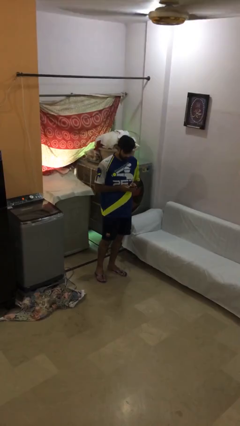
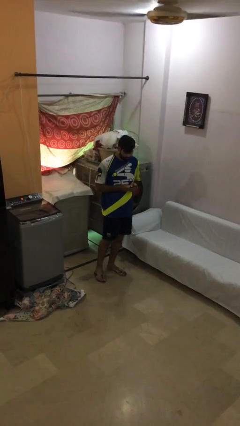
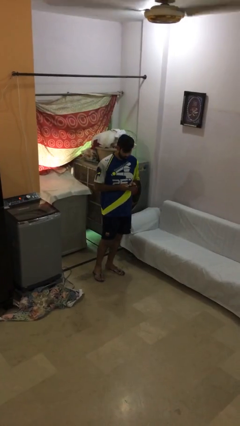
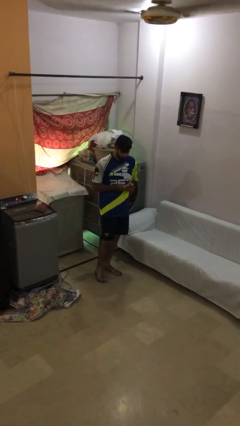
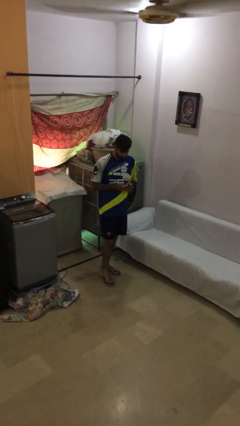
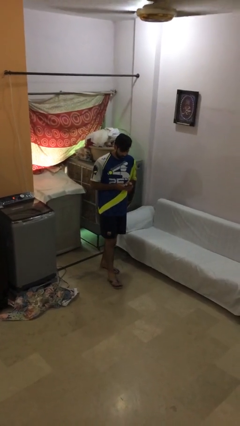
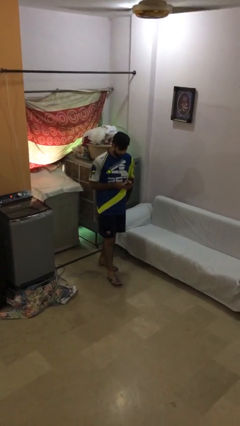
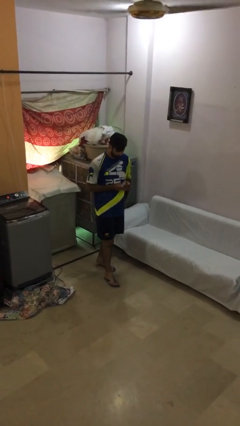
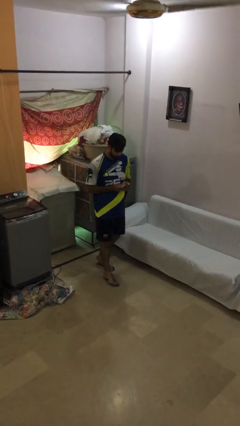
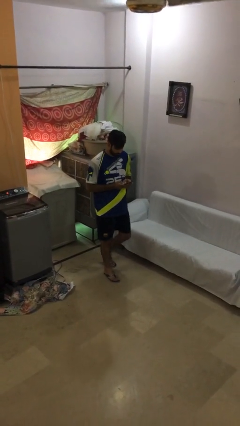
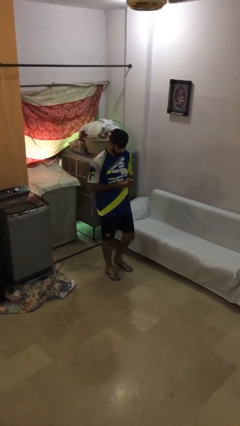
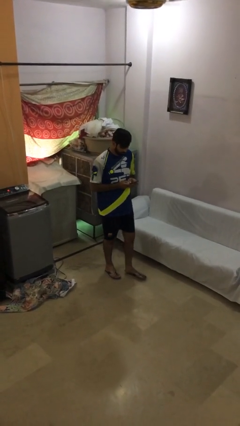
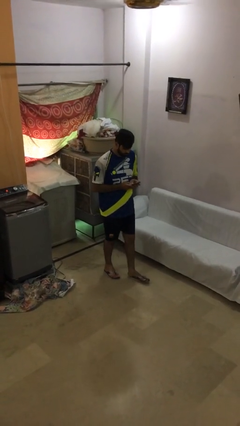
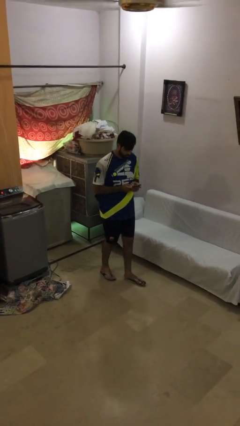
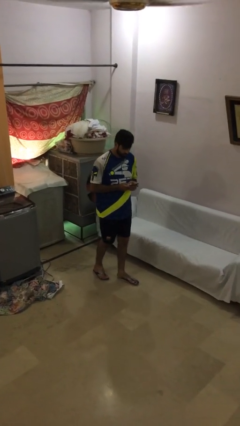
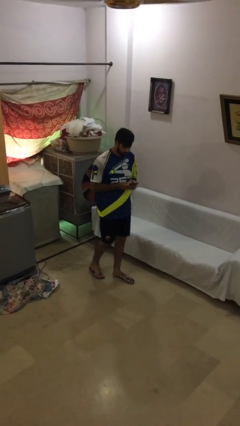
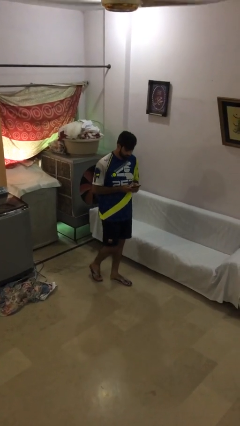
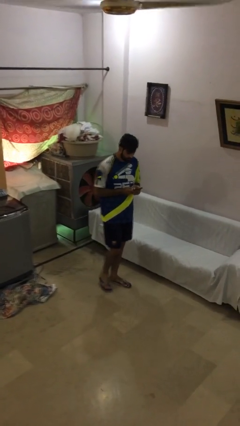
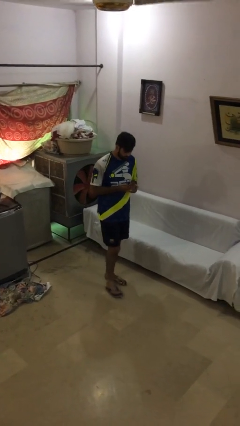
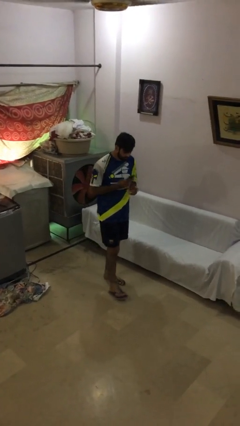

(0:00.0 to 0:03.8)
person texts on phone

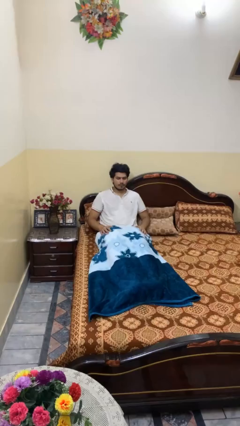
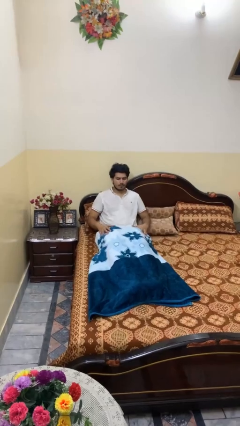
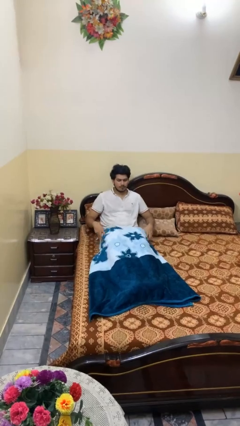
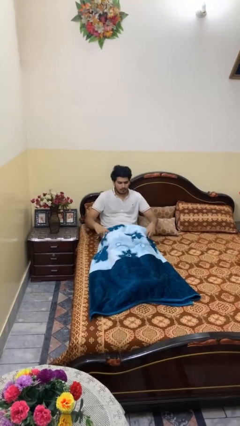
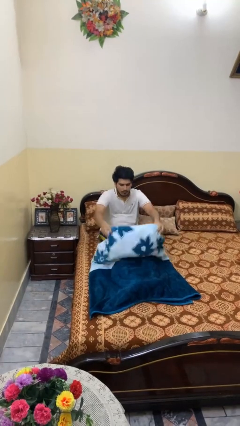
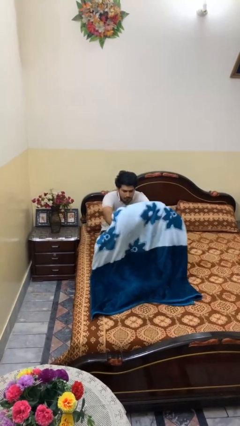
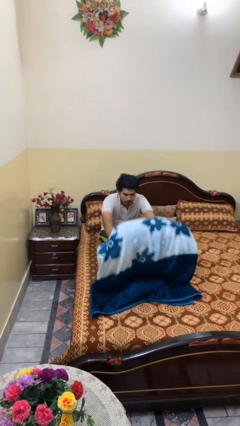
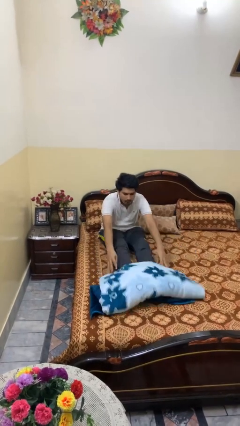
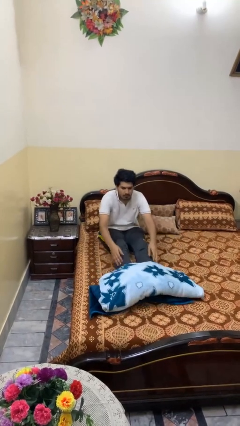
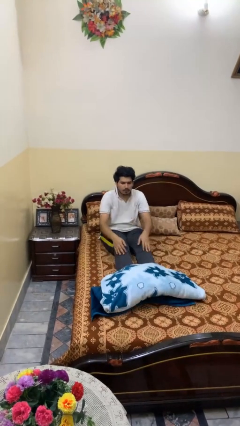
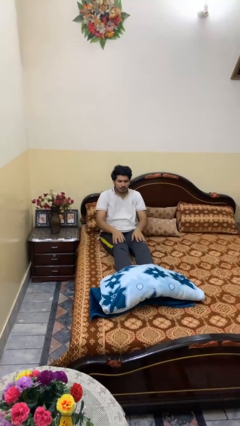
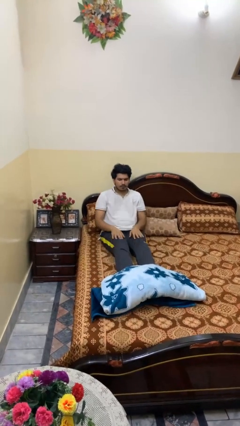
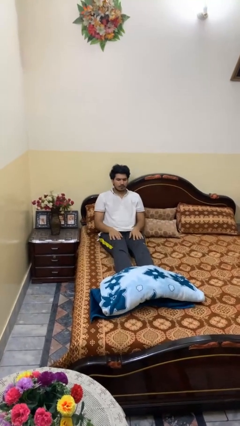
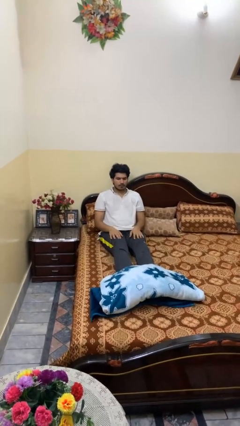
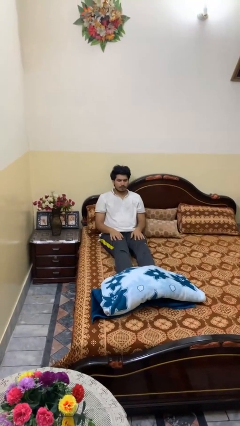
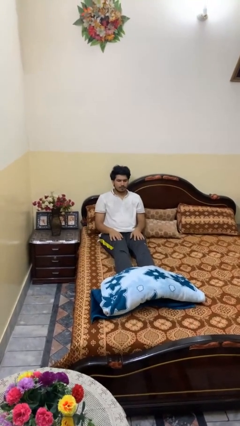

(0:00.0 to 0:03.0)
person uncovers with blanket

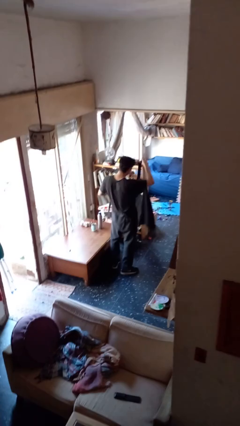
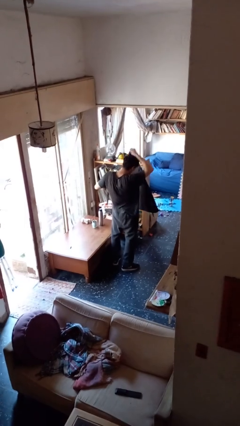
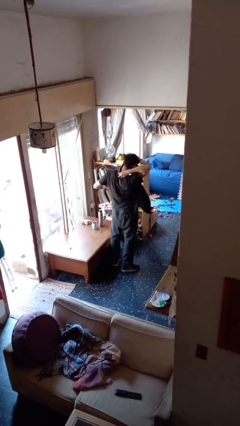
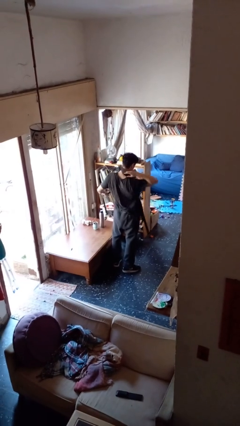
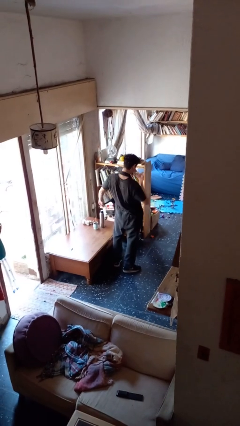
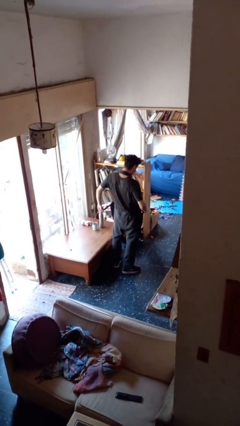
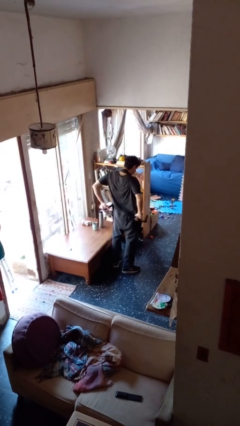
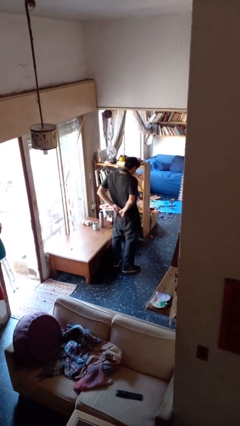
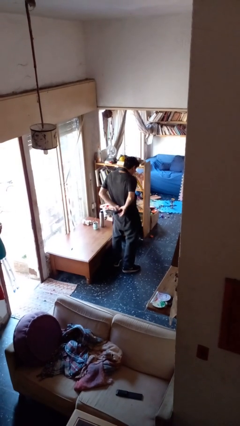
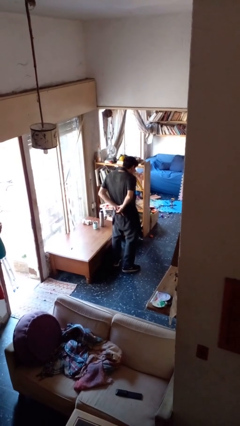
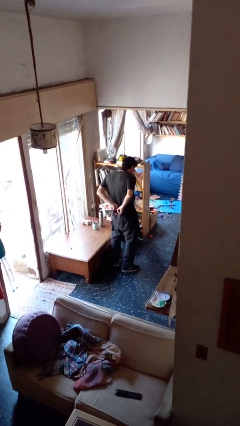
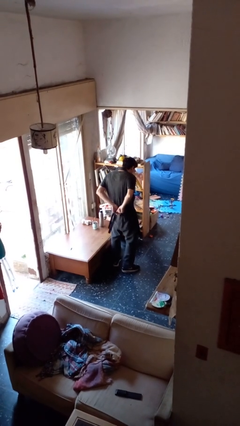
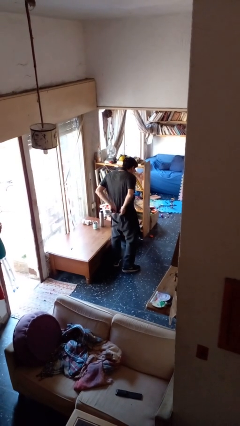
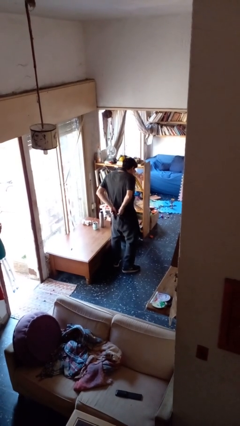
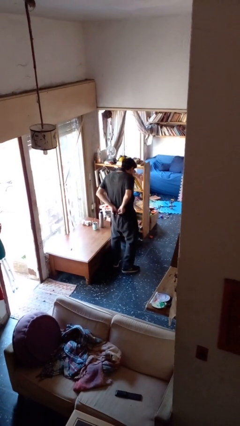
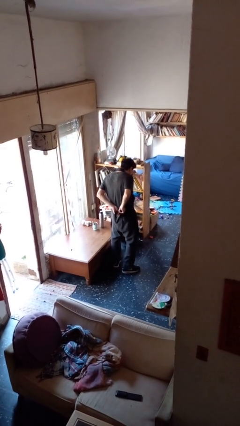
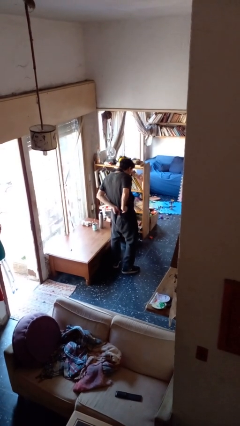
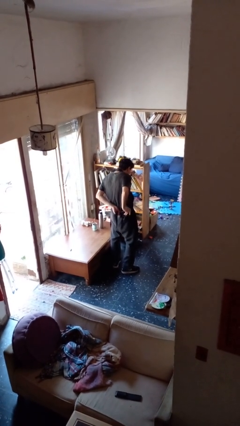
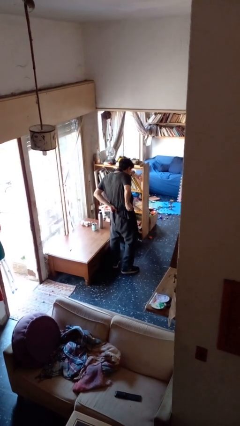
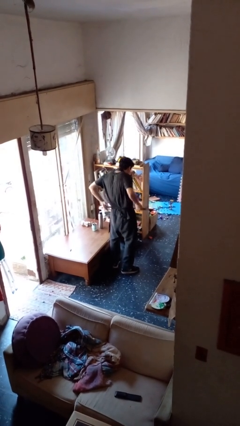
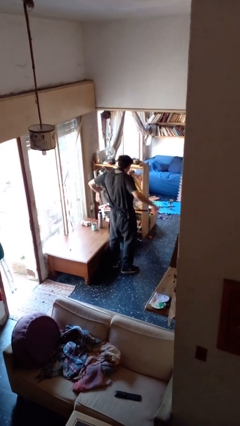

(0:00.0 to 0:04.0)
person puts on apron

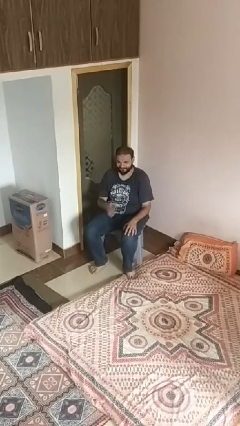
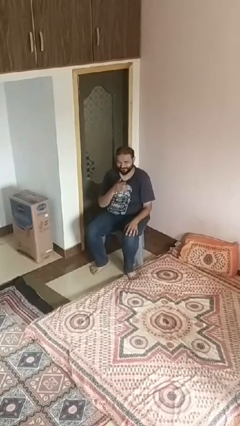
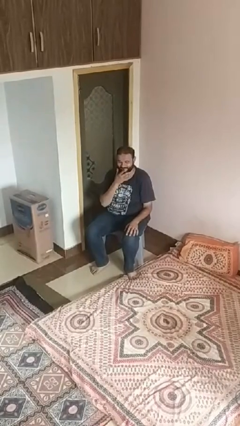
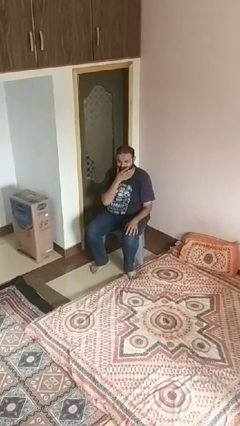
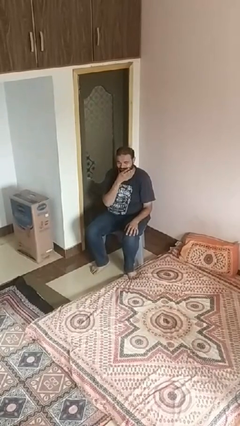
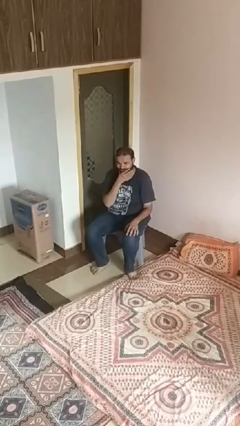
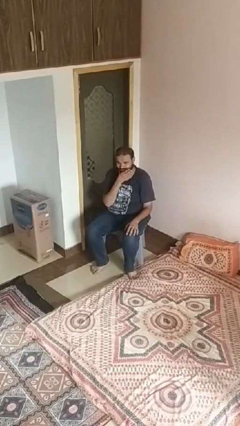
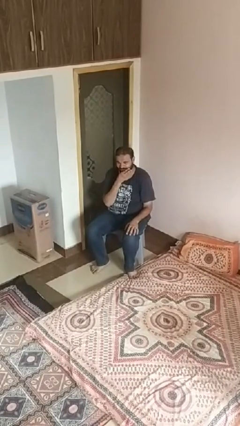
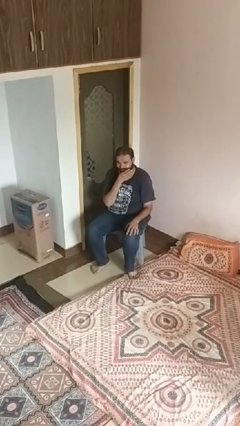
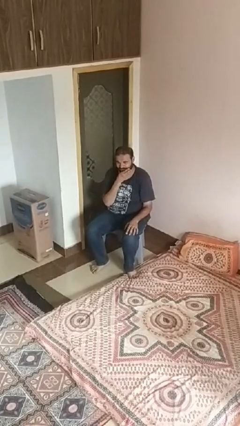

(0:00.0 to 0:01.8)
person strokes chin

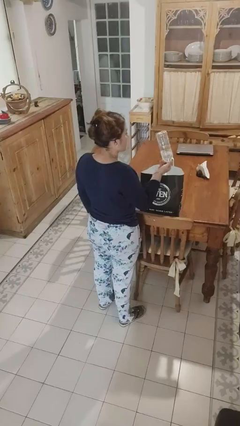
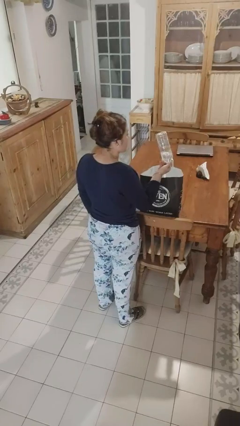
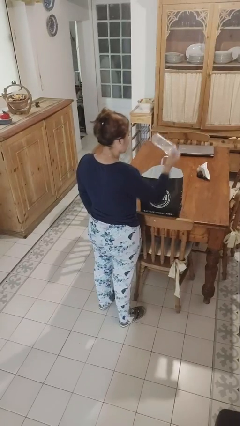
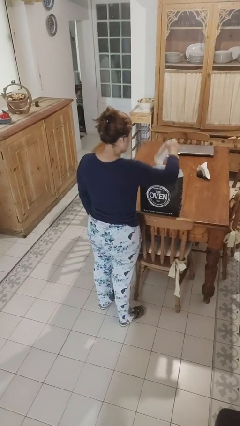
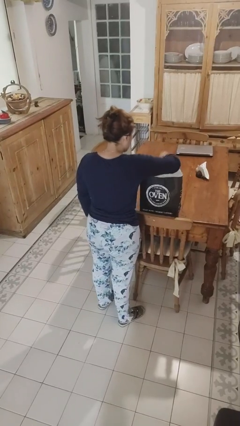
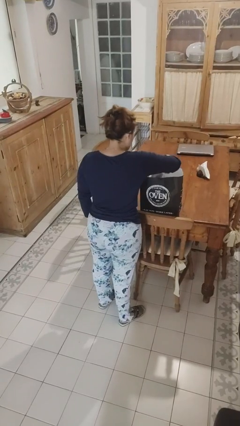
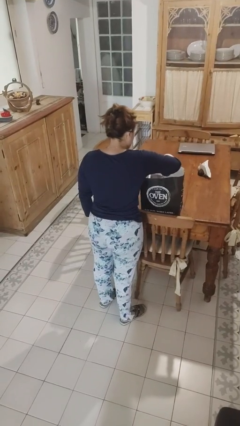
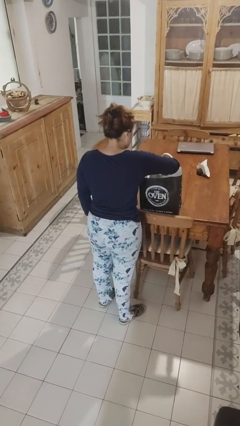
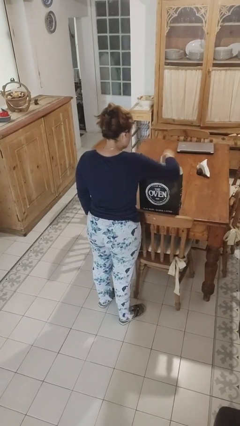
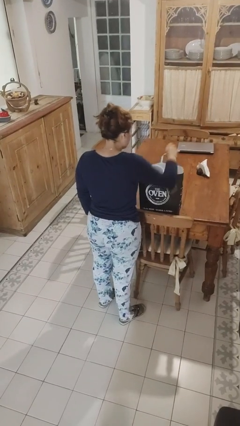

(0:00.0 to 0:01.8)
person puts object into bag

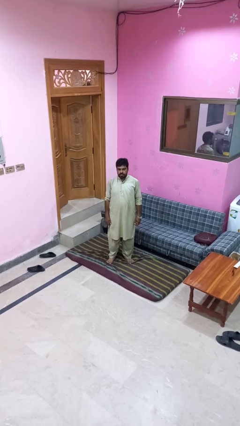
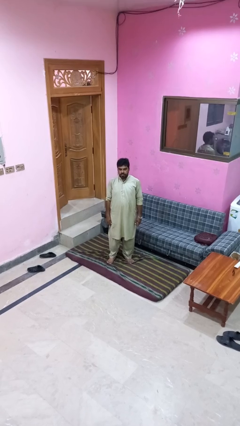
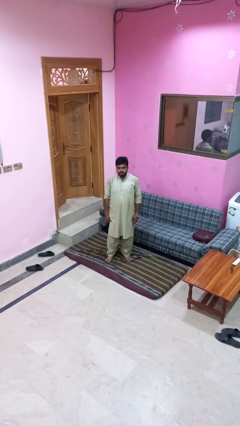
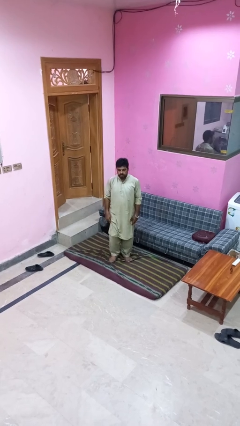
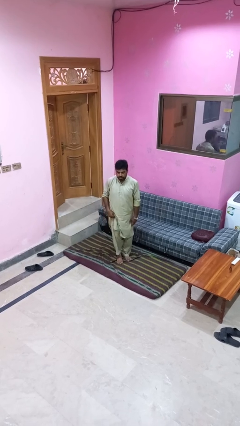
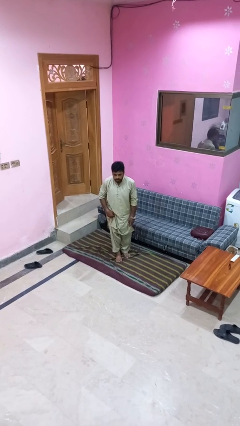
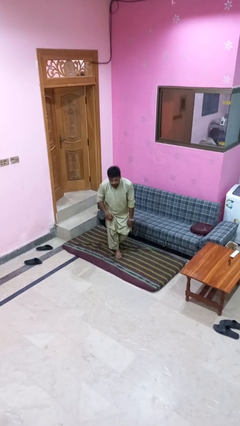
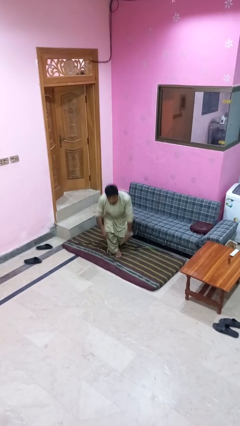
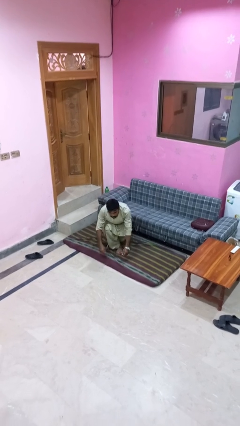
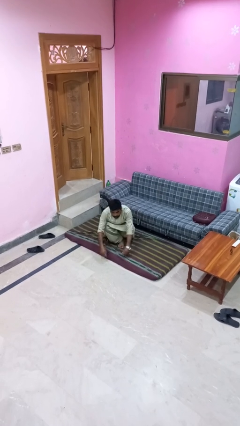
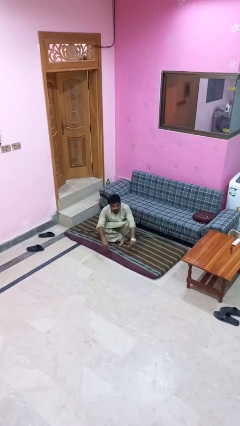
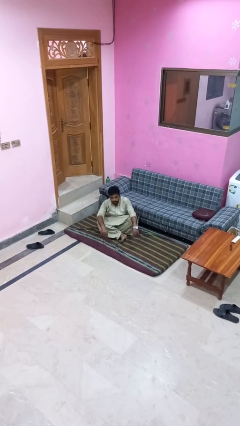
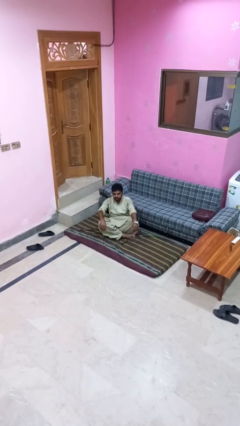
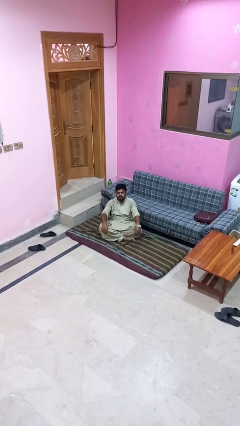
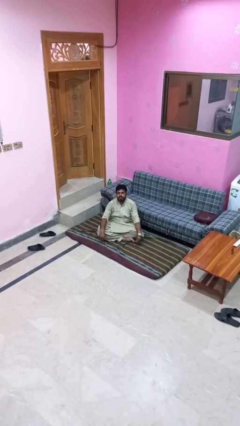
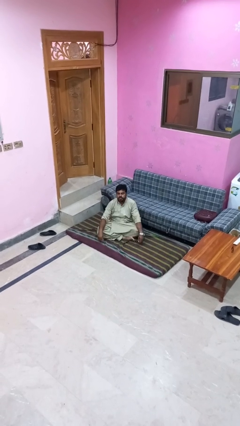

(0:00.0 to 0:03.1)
person sits crisscross
